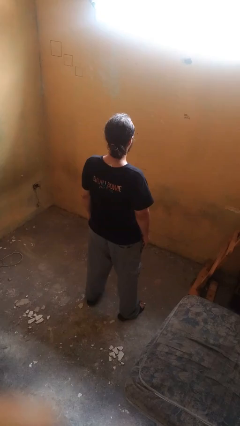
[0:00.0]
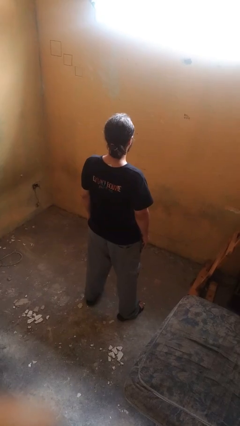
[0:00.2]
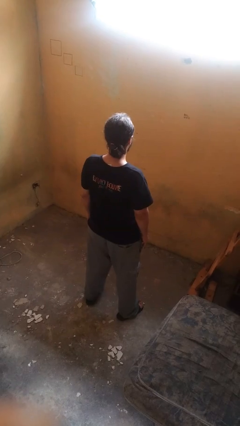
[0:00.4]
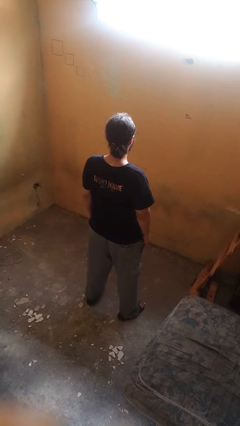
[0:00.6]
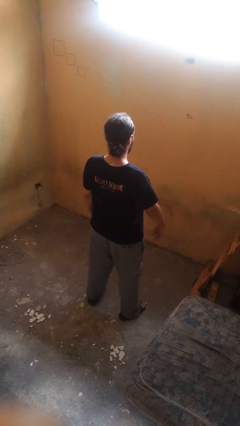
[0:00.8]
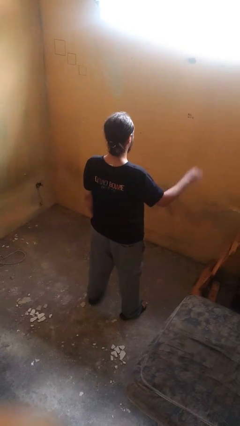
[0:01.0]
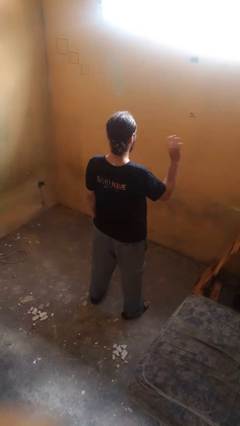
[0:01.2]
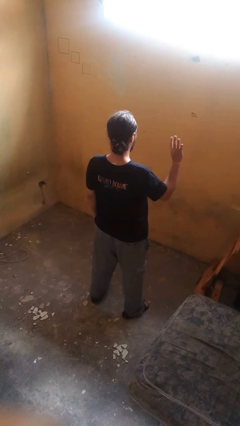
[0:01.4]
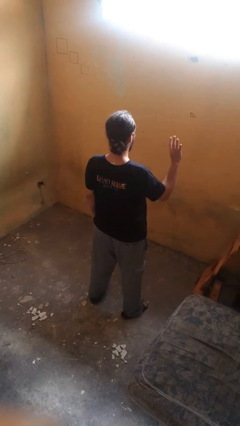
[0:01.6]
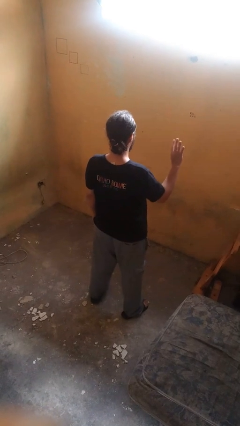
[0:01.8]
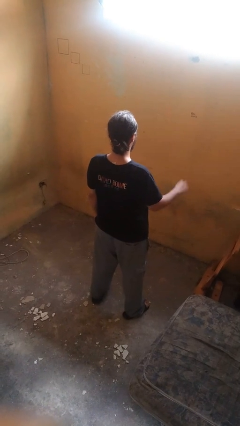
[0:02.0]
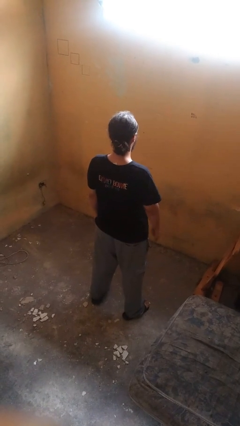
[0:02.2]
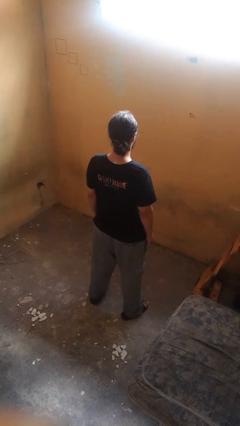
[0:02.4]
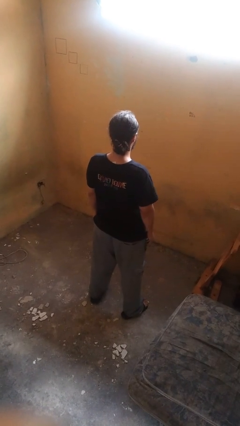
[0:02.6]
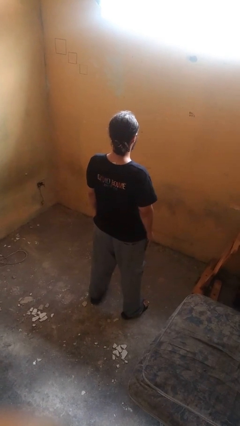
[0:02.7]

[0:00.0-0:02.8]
person gestures number four

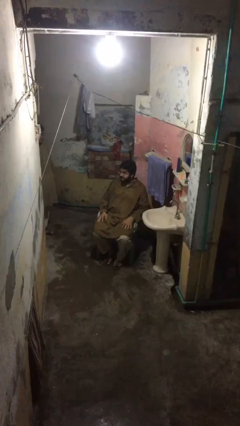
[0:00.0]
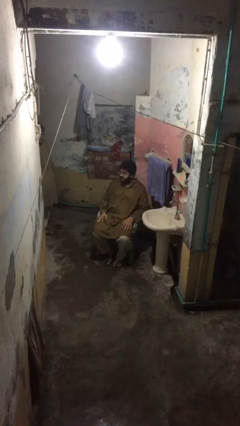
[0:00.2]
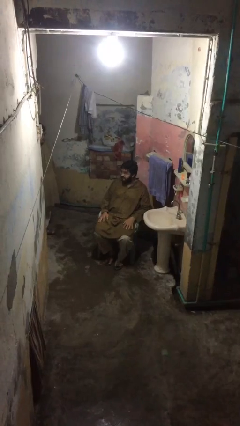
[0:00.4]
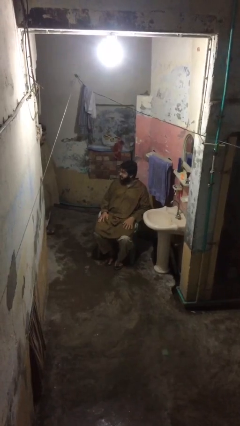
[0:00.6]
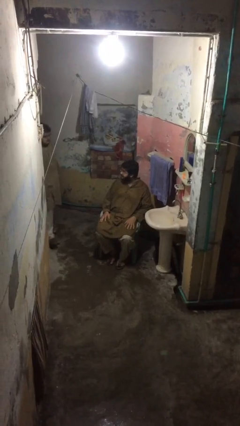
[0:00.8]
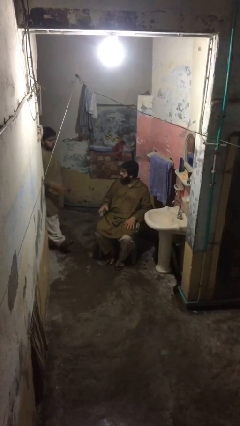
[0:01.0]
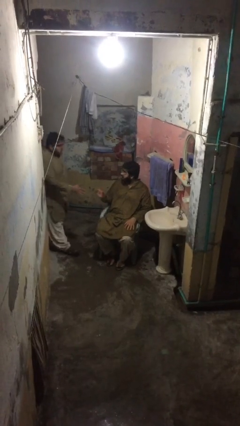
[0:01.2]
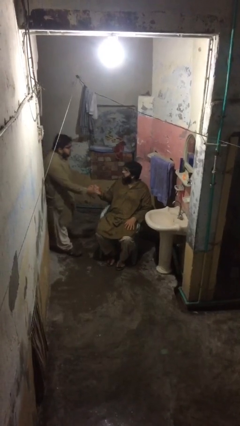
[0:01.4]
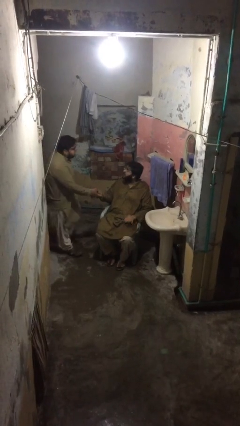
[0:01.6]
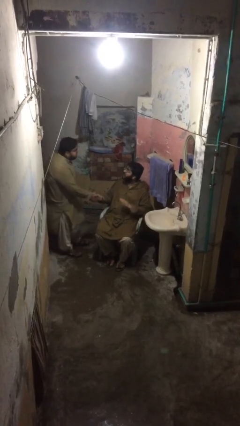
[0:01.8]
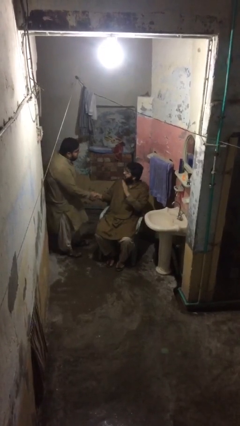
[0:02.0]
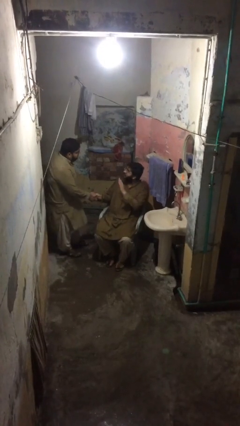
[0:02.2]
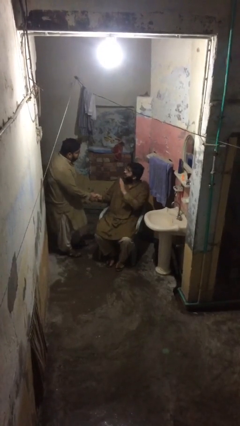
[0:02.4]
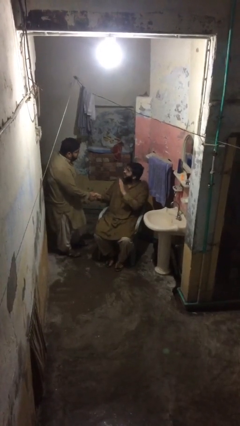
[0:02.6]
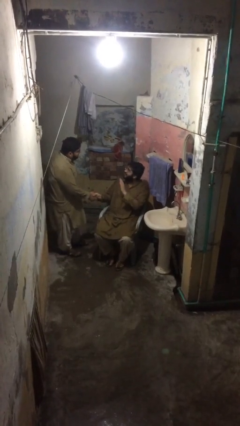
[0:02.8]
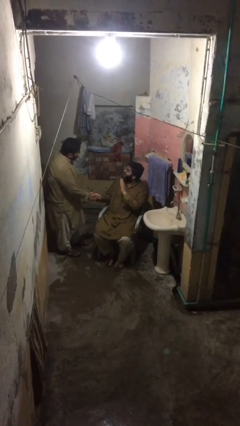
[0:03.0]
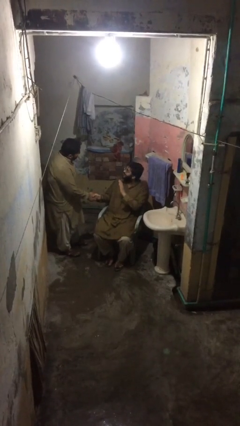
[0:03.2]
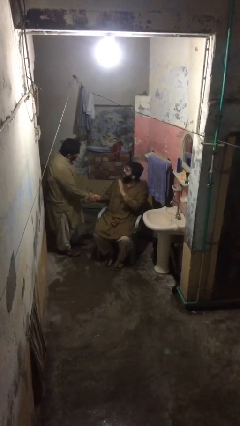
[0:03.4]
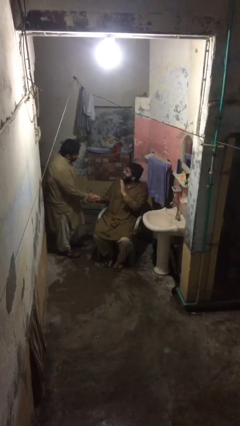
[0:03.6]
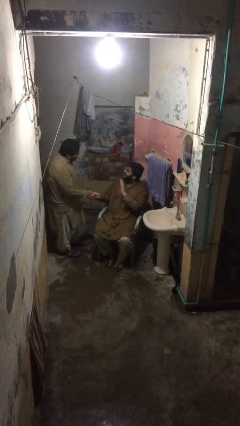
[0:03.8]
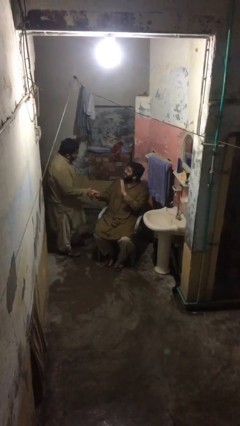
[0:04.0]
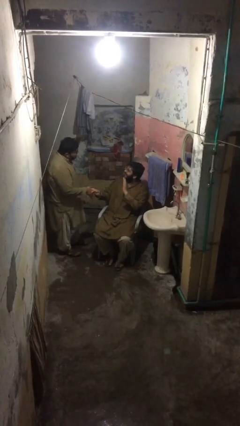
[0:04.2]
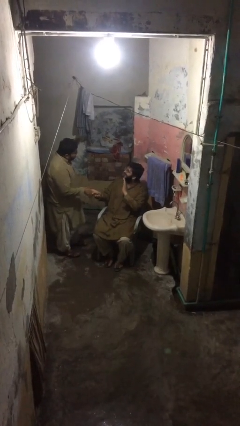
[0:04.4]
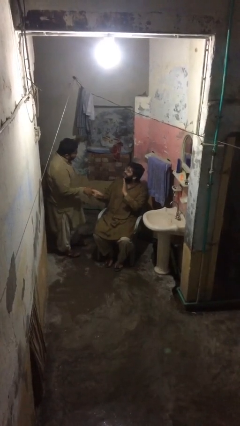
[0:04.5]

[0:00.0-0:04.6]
person shakes hand

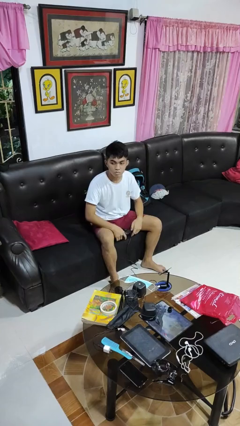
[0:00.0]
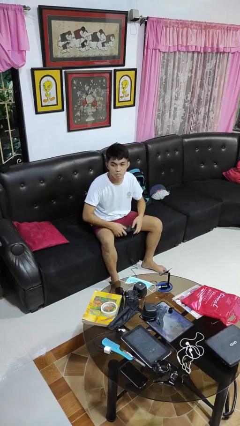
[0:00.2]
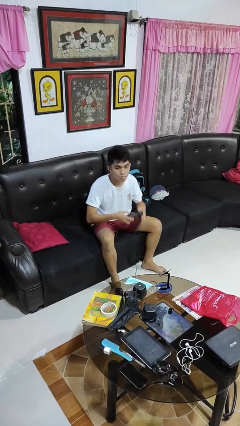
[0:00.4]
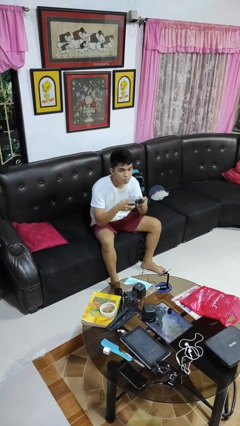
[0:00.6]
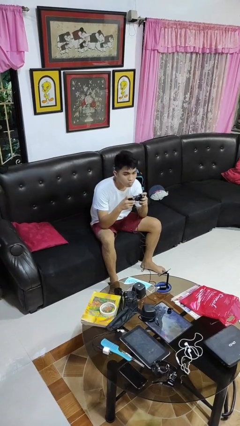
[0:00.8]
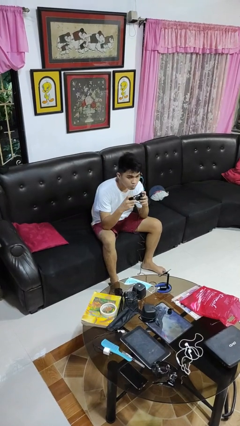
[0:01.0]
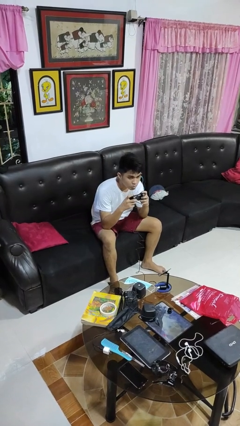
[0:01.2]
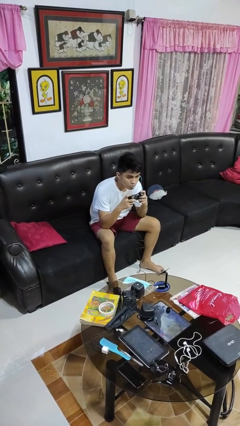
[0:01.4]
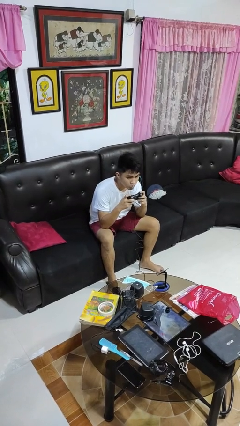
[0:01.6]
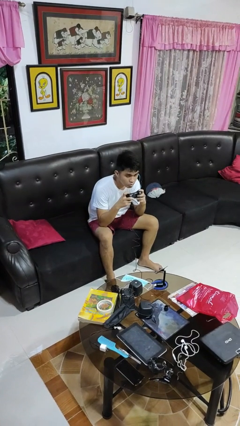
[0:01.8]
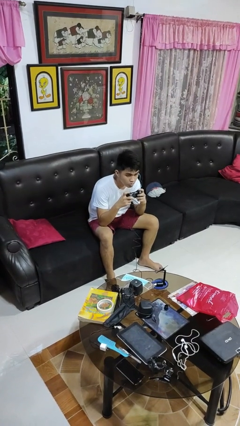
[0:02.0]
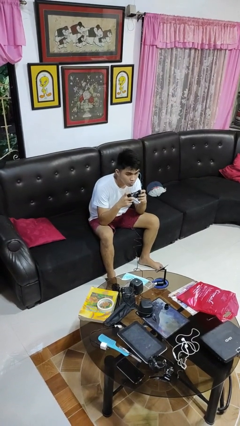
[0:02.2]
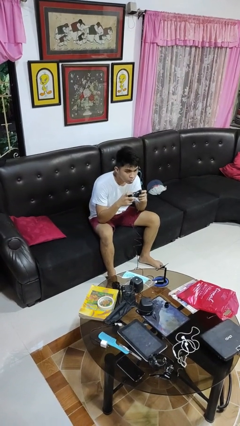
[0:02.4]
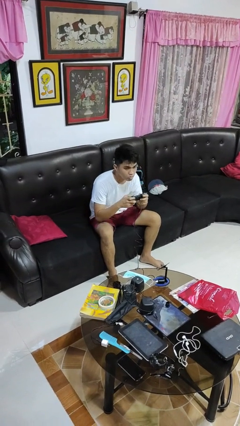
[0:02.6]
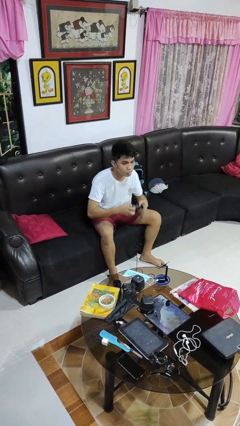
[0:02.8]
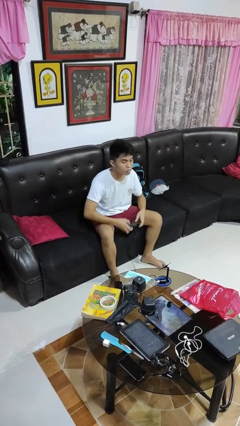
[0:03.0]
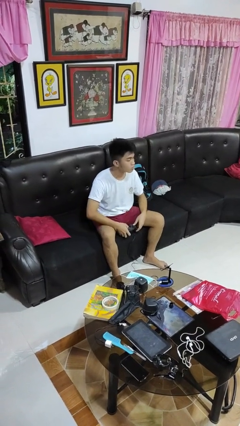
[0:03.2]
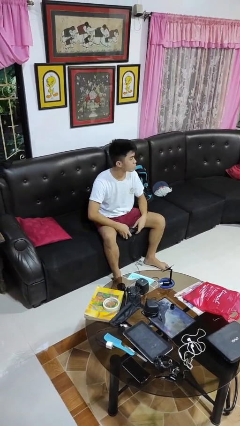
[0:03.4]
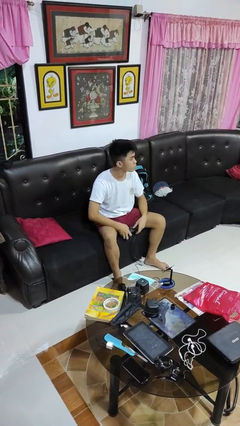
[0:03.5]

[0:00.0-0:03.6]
person interacts with handheld game

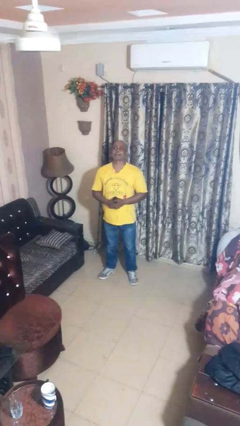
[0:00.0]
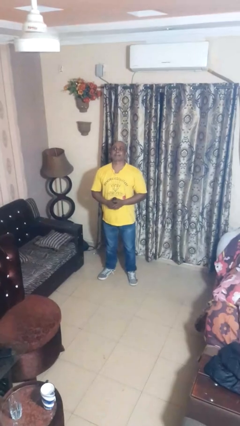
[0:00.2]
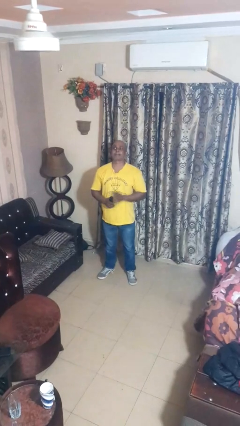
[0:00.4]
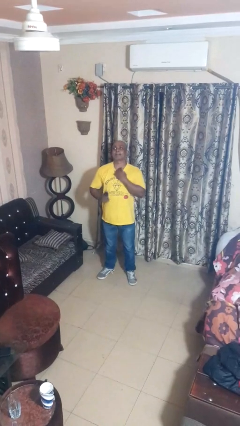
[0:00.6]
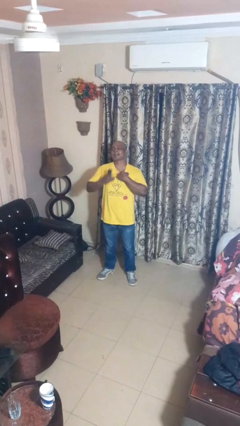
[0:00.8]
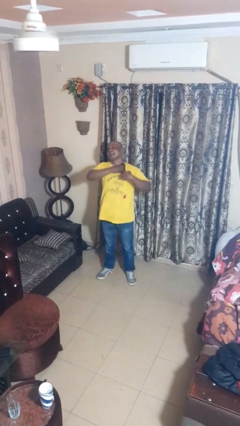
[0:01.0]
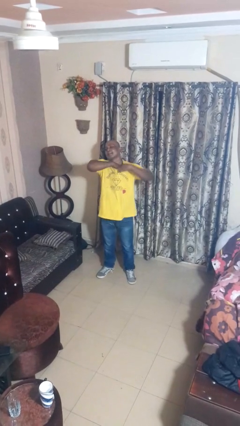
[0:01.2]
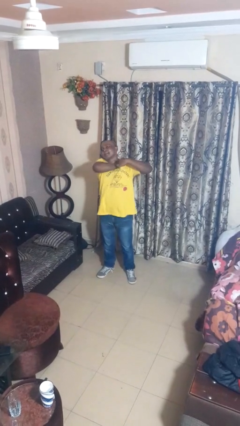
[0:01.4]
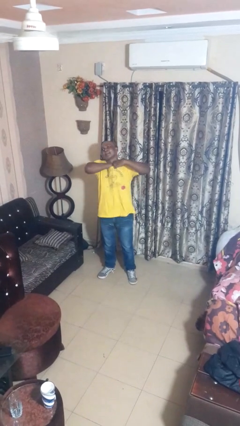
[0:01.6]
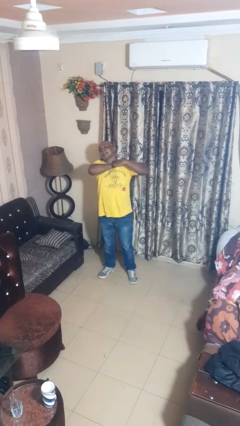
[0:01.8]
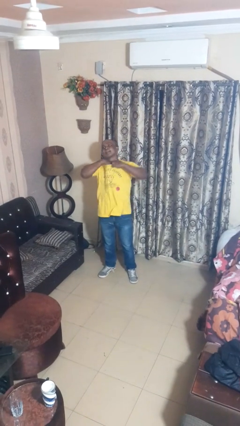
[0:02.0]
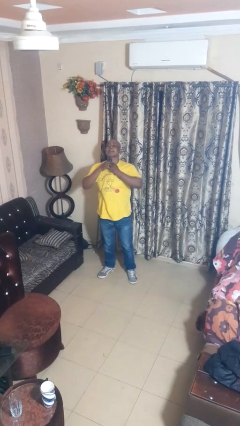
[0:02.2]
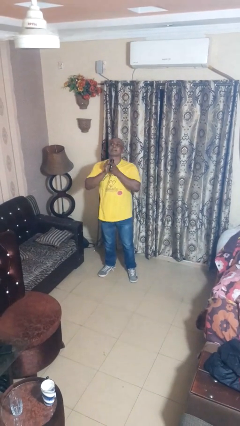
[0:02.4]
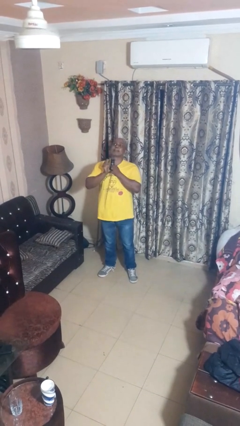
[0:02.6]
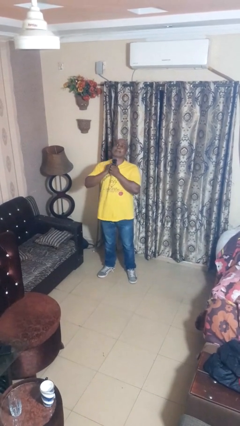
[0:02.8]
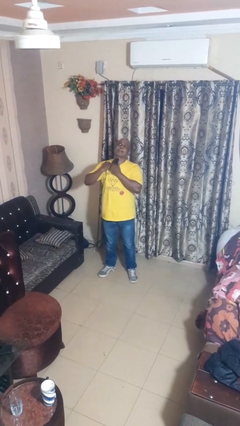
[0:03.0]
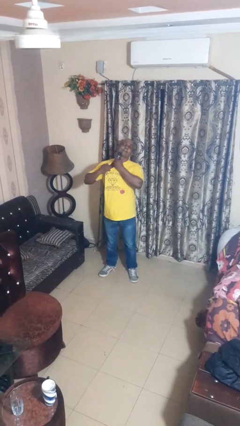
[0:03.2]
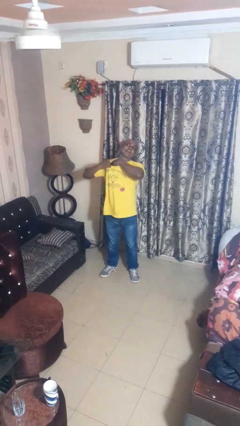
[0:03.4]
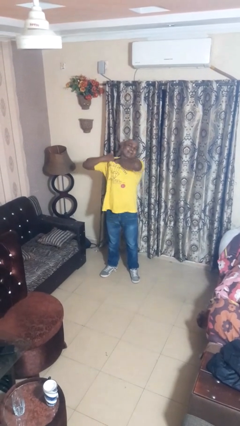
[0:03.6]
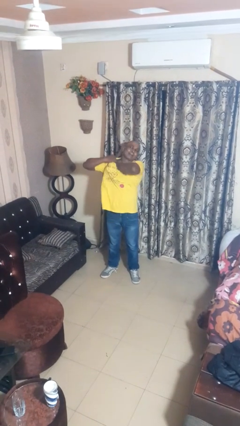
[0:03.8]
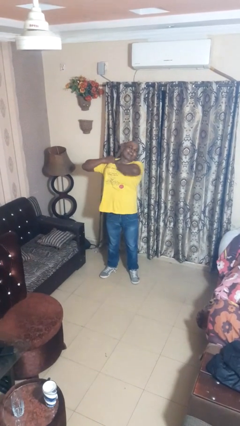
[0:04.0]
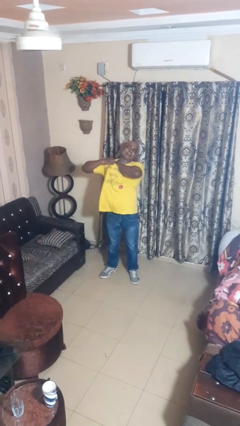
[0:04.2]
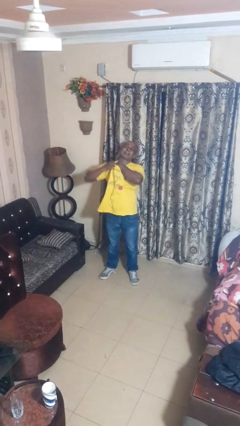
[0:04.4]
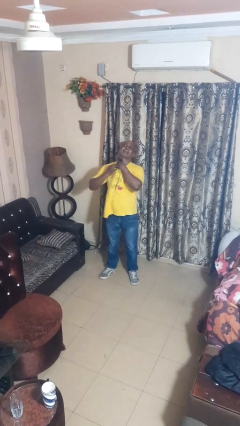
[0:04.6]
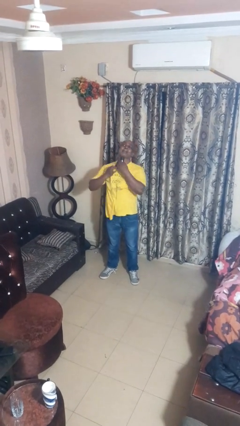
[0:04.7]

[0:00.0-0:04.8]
person applies deodorant

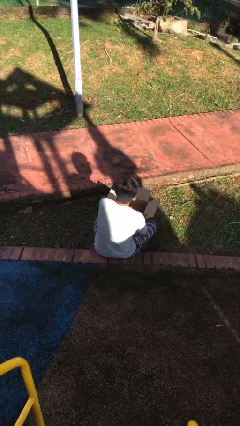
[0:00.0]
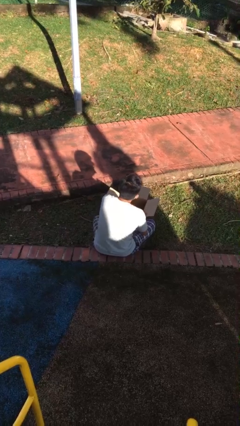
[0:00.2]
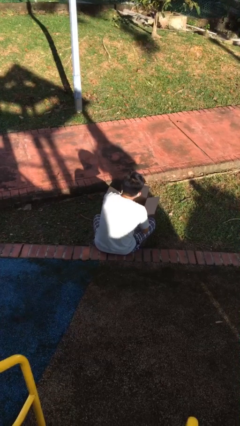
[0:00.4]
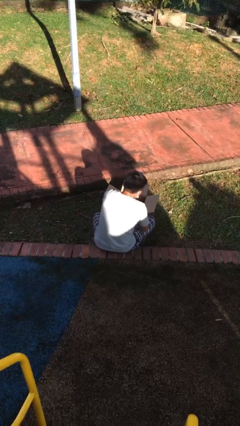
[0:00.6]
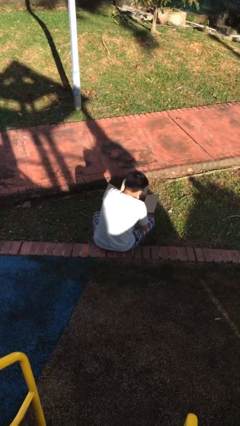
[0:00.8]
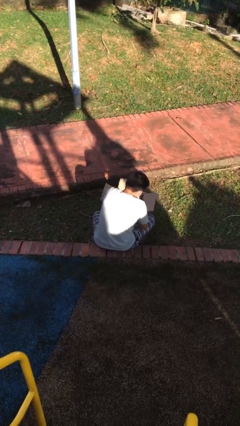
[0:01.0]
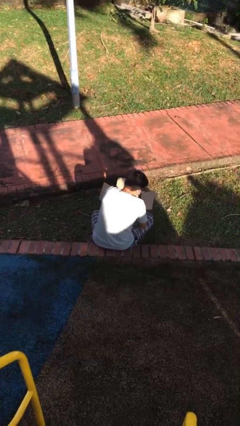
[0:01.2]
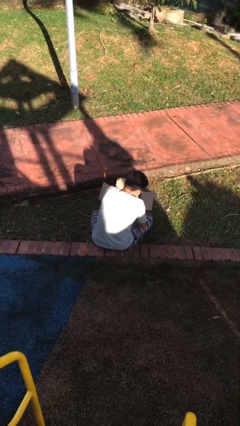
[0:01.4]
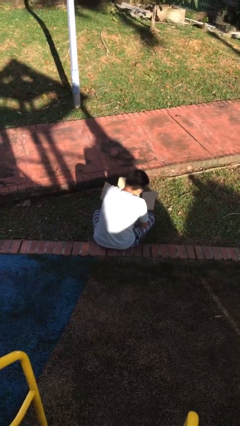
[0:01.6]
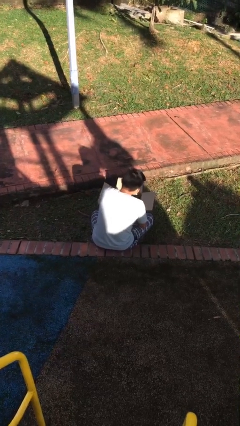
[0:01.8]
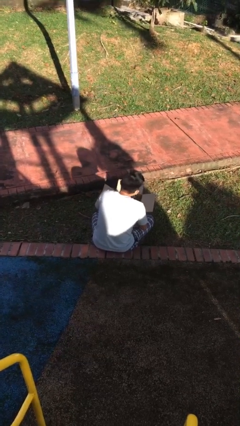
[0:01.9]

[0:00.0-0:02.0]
person searches in box
